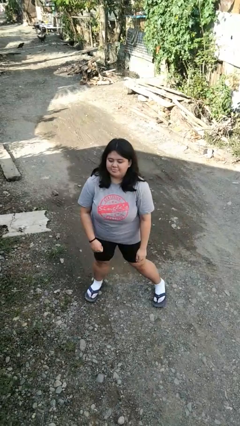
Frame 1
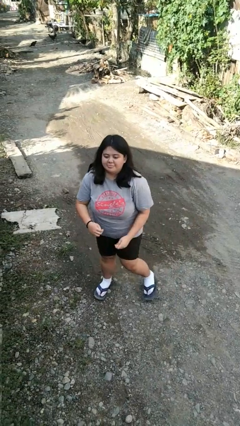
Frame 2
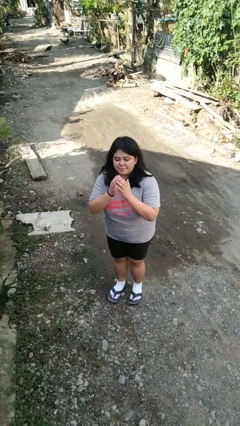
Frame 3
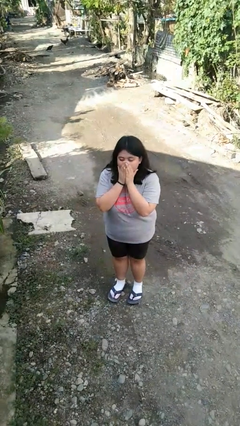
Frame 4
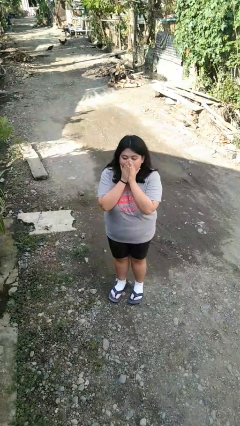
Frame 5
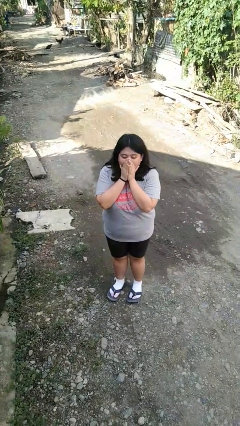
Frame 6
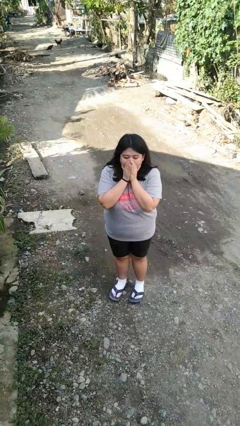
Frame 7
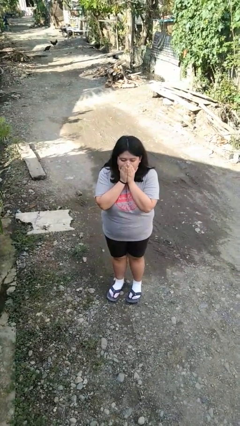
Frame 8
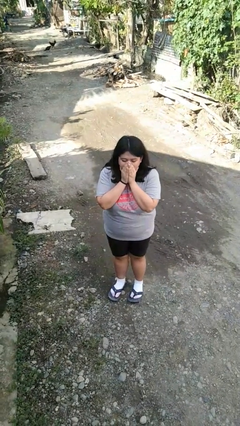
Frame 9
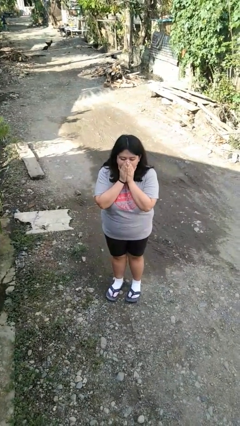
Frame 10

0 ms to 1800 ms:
person blows into hands

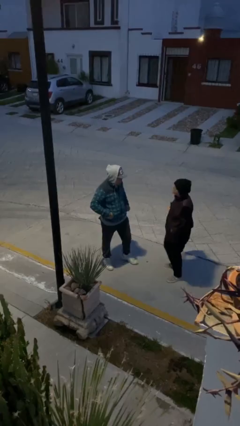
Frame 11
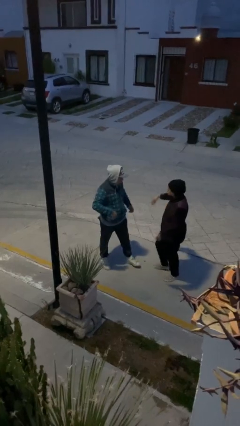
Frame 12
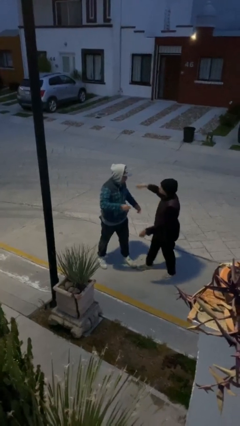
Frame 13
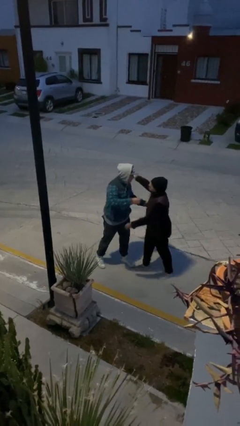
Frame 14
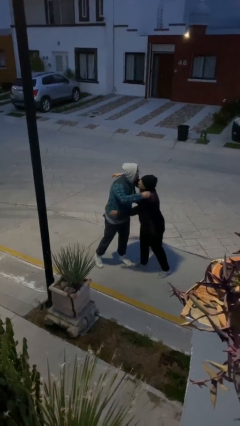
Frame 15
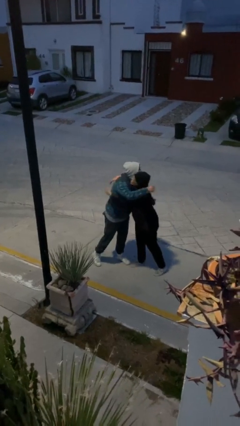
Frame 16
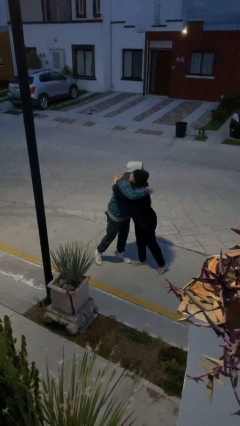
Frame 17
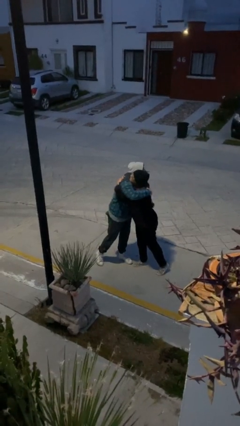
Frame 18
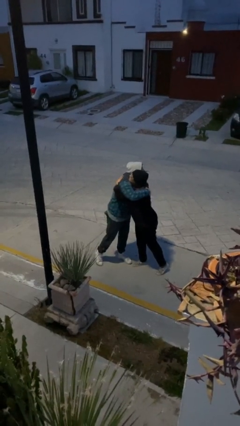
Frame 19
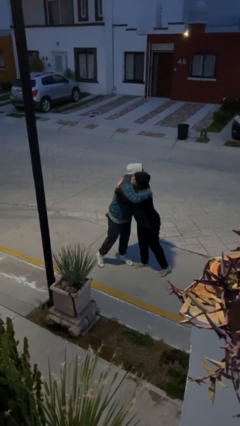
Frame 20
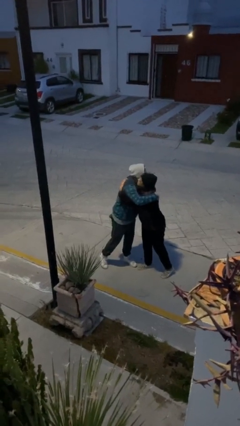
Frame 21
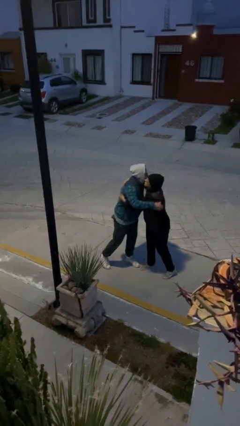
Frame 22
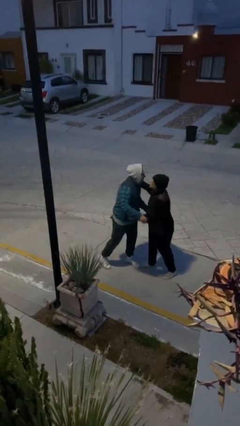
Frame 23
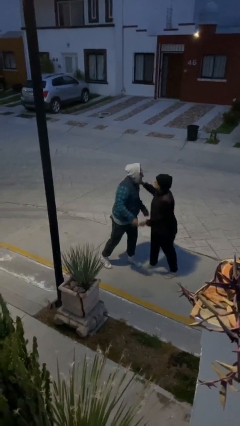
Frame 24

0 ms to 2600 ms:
person embraces person

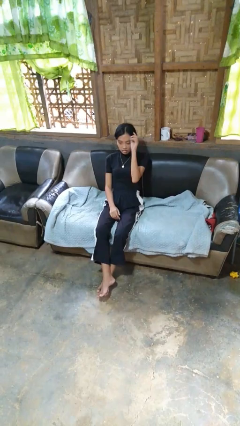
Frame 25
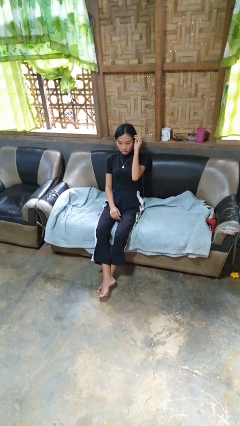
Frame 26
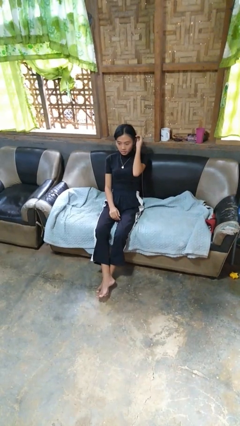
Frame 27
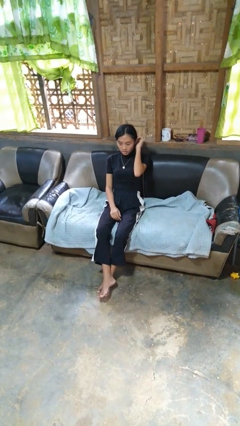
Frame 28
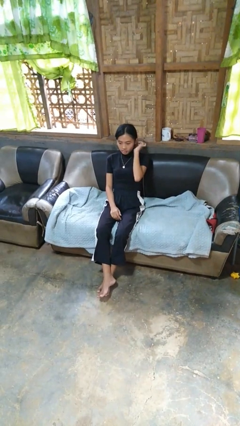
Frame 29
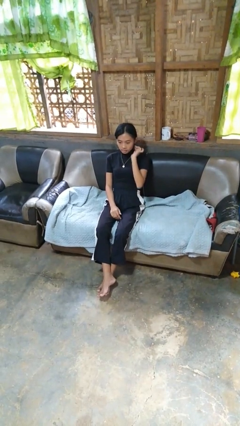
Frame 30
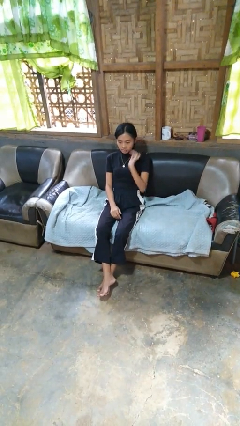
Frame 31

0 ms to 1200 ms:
person strokes hair

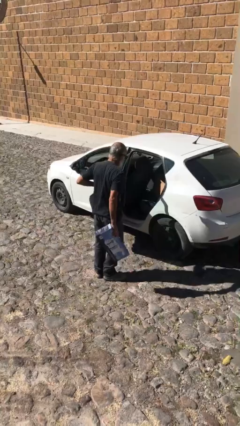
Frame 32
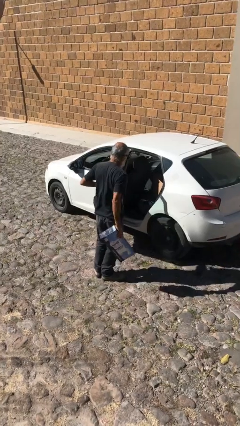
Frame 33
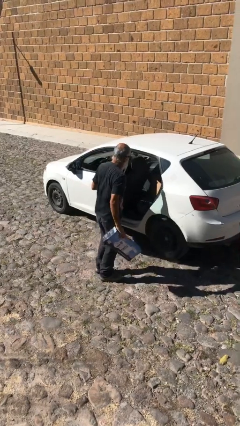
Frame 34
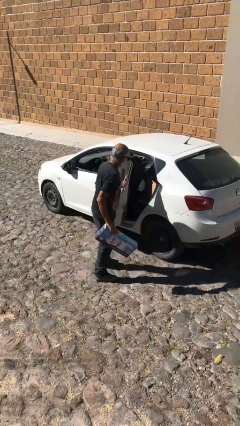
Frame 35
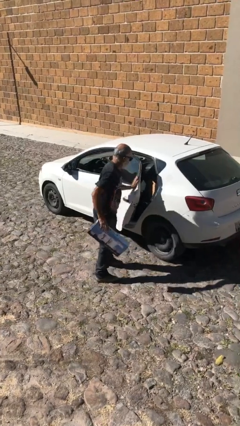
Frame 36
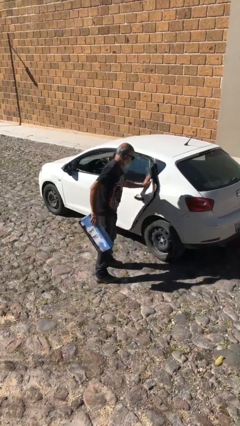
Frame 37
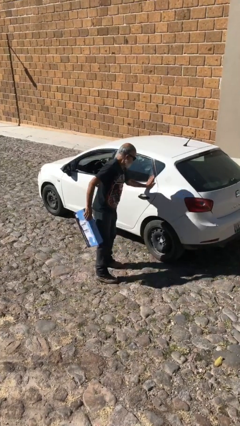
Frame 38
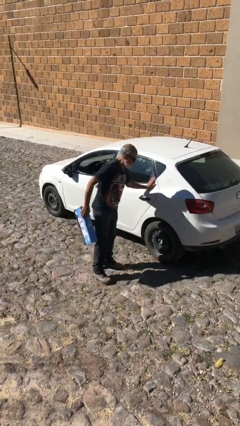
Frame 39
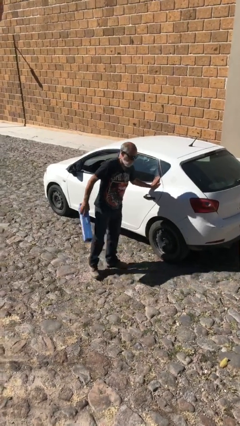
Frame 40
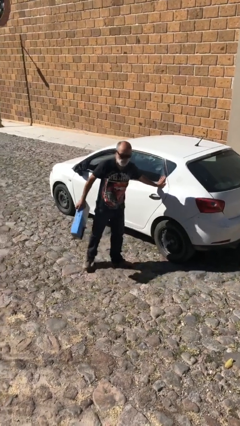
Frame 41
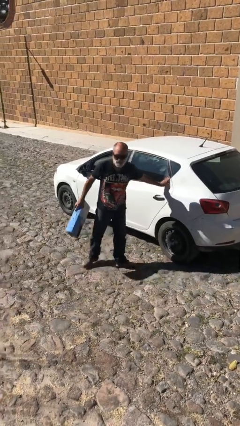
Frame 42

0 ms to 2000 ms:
person closes car door

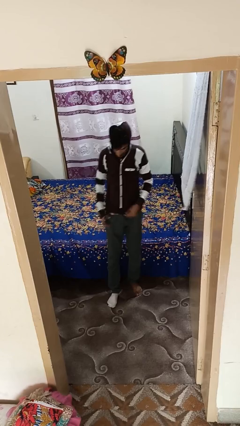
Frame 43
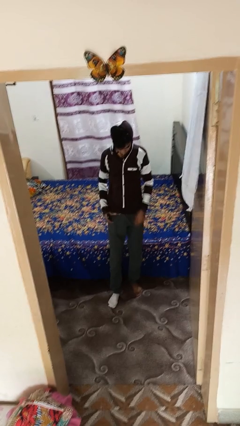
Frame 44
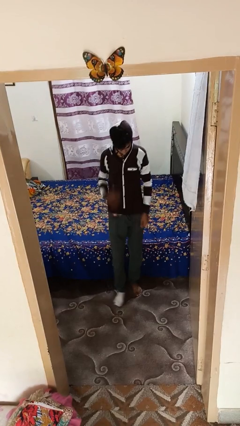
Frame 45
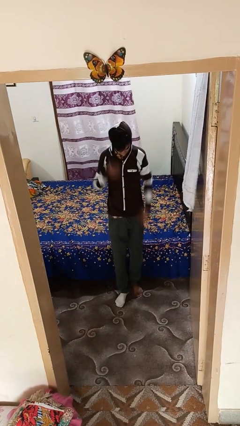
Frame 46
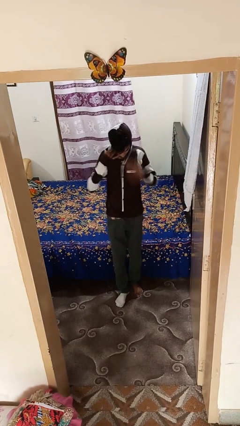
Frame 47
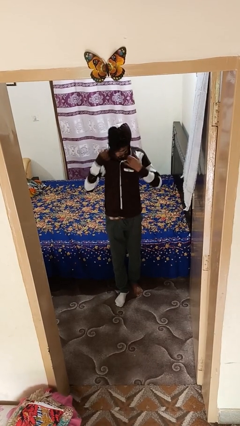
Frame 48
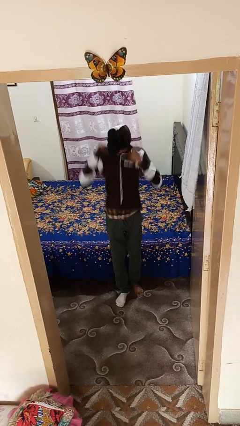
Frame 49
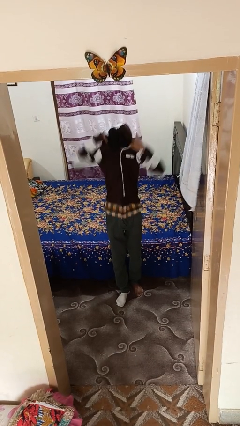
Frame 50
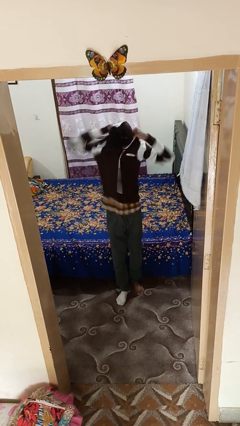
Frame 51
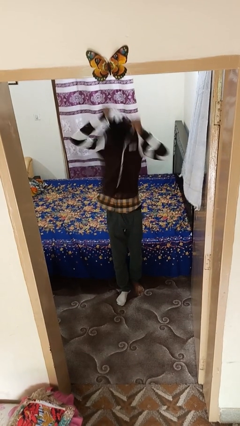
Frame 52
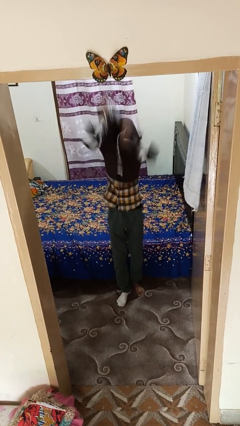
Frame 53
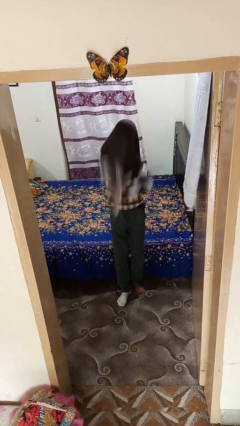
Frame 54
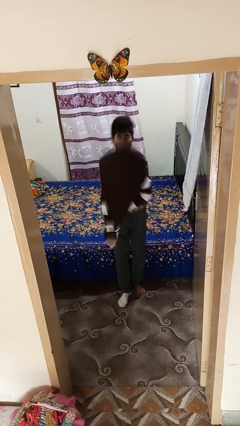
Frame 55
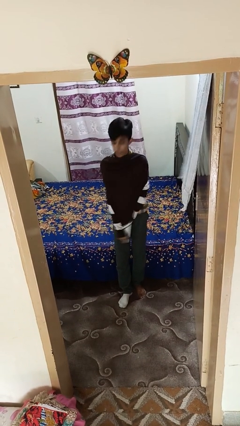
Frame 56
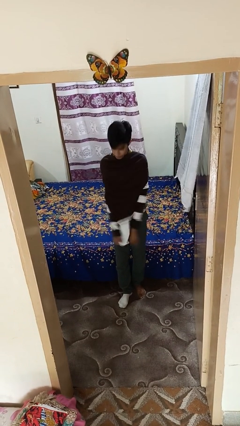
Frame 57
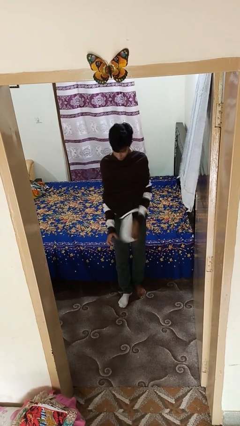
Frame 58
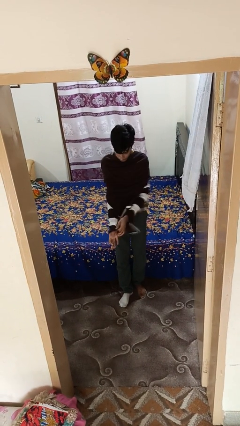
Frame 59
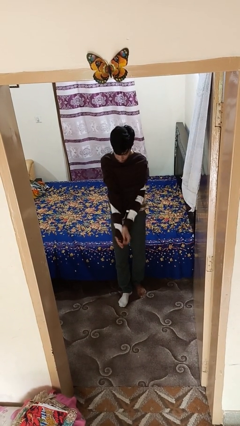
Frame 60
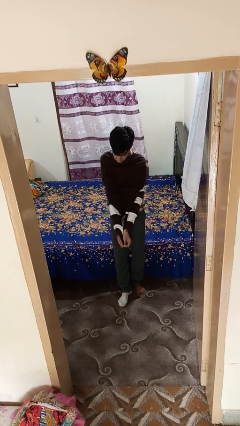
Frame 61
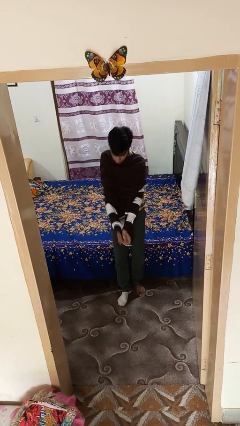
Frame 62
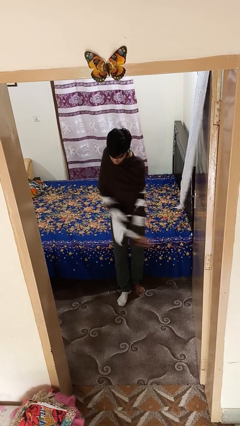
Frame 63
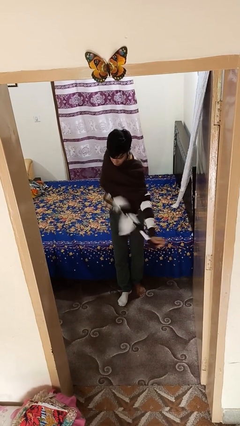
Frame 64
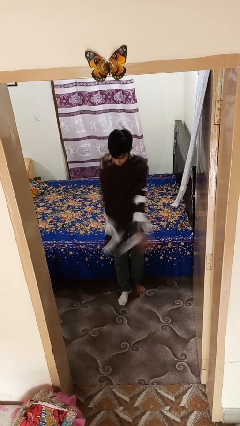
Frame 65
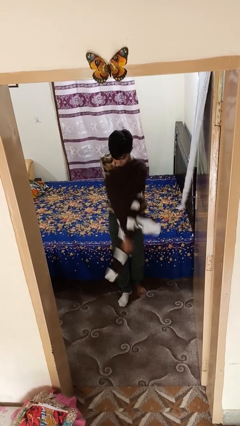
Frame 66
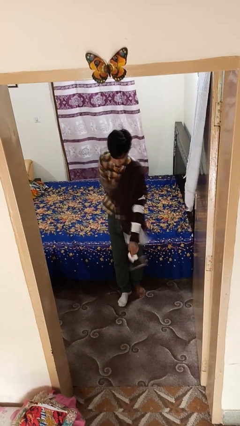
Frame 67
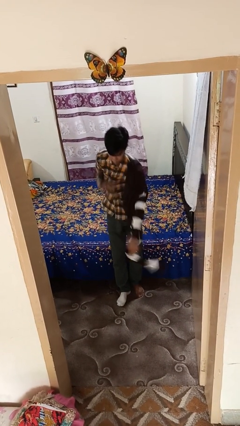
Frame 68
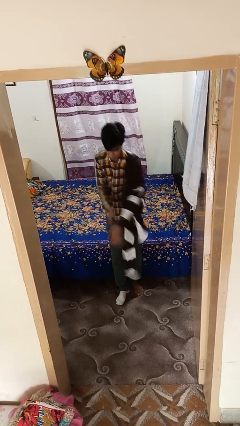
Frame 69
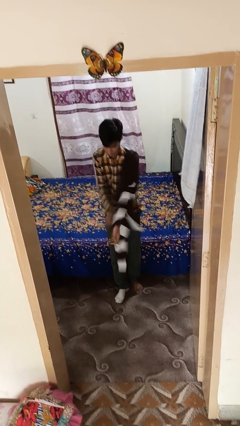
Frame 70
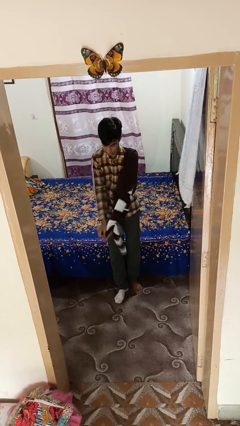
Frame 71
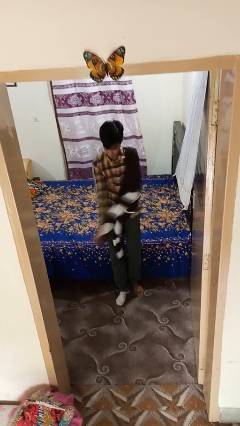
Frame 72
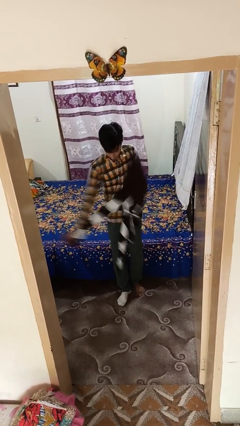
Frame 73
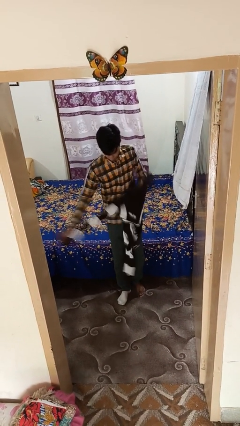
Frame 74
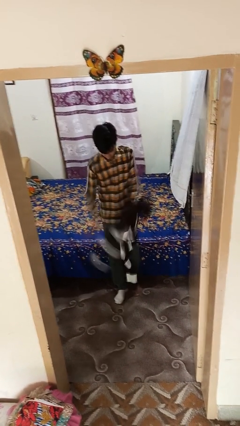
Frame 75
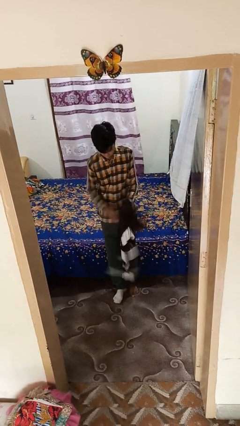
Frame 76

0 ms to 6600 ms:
person takes off hoodie

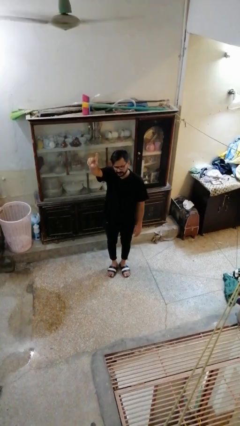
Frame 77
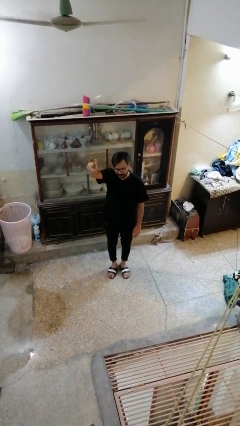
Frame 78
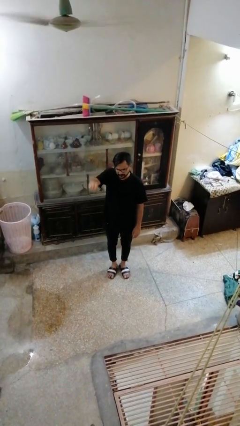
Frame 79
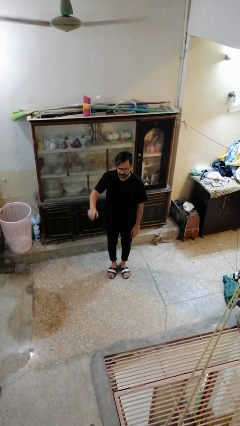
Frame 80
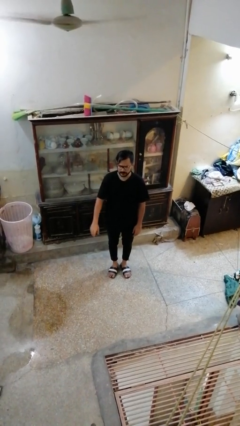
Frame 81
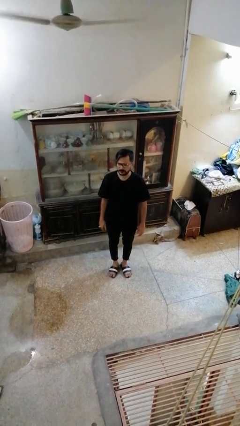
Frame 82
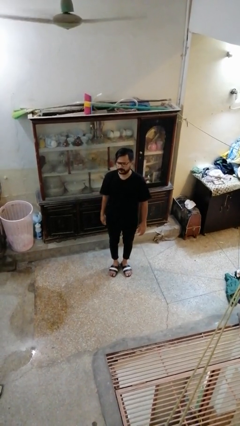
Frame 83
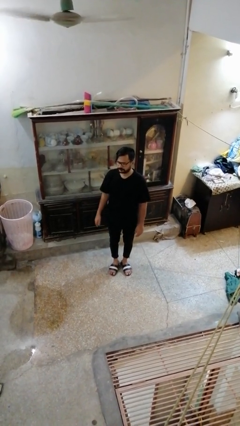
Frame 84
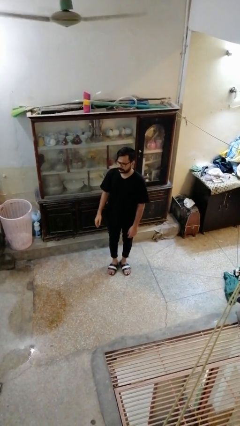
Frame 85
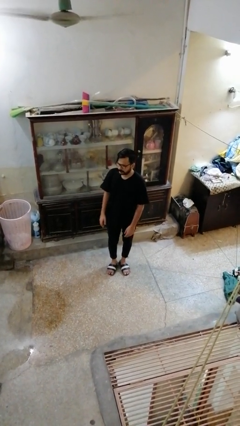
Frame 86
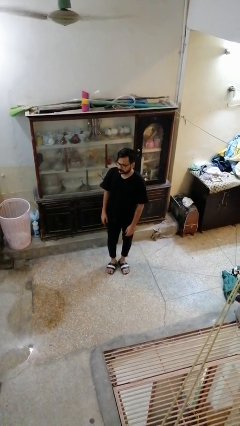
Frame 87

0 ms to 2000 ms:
person gestures lower hand

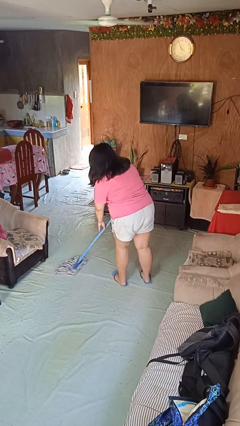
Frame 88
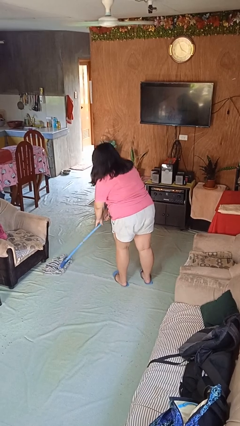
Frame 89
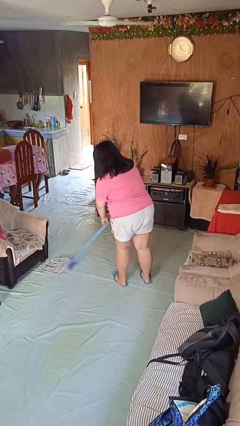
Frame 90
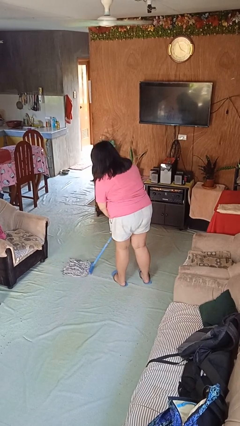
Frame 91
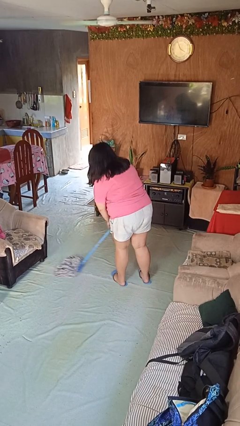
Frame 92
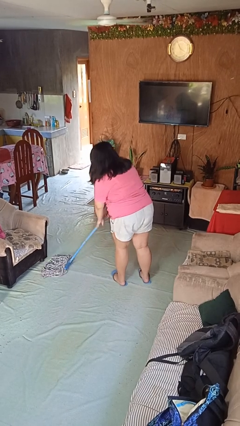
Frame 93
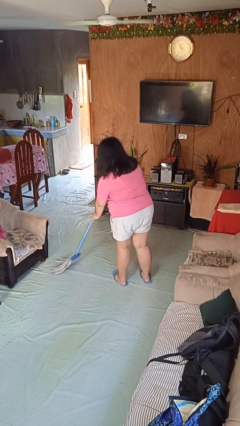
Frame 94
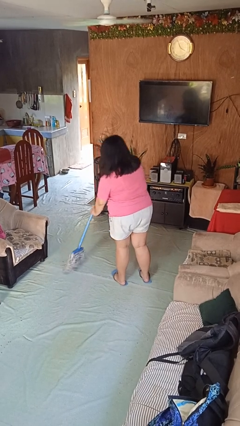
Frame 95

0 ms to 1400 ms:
person mops
